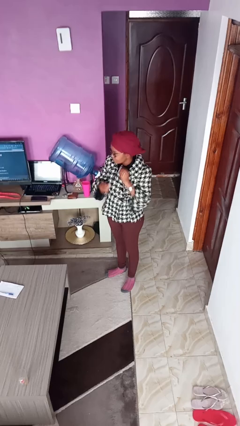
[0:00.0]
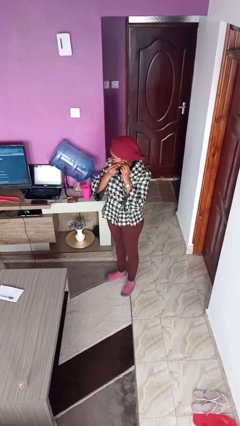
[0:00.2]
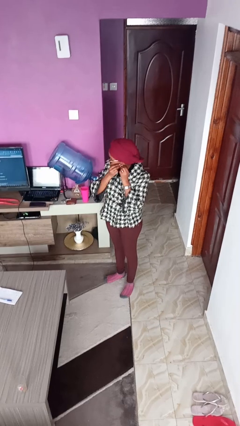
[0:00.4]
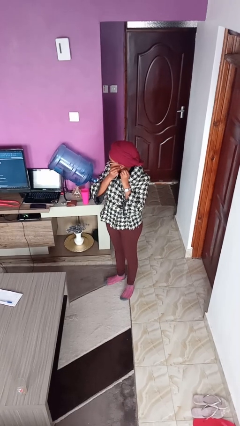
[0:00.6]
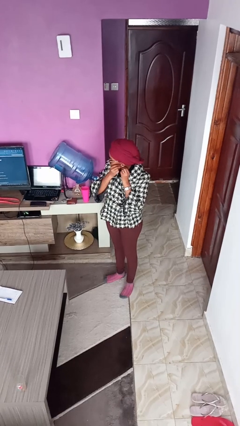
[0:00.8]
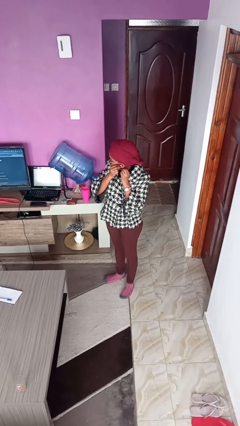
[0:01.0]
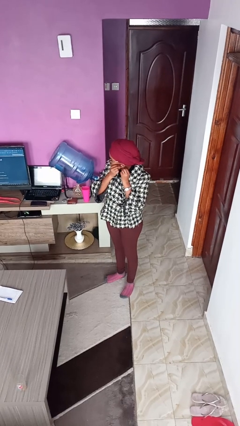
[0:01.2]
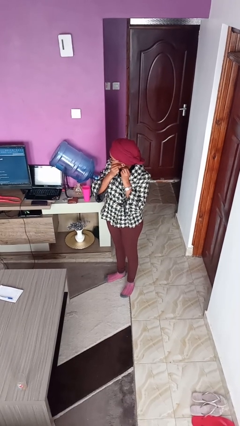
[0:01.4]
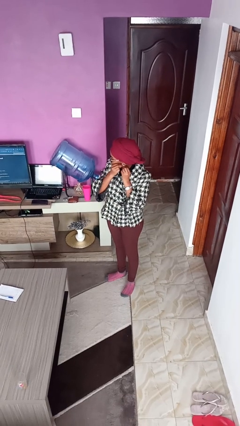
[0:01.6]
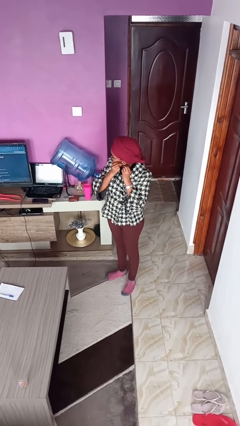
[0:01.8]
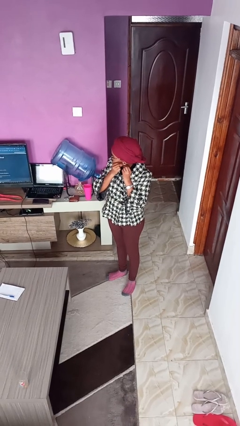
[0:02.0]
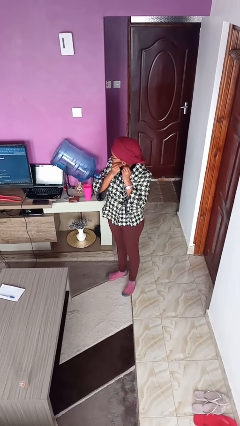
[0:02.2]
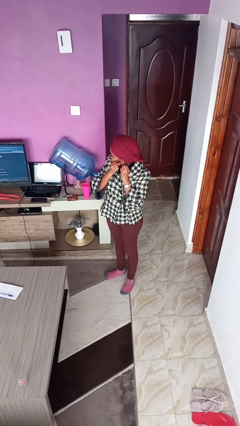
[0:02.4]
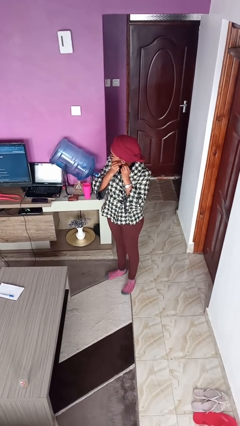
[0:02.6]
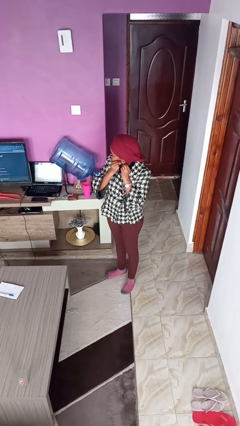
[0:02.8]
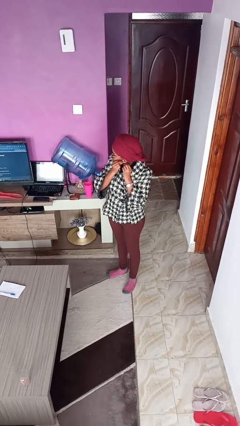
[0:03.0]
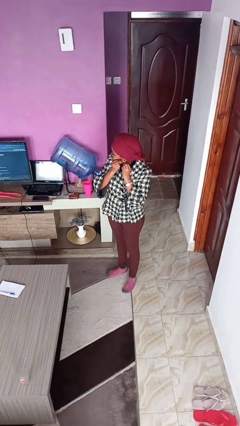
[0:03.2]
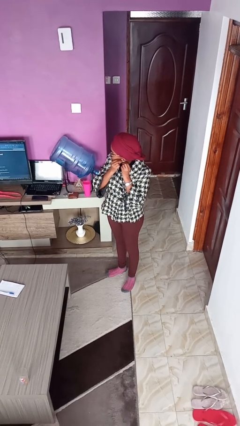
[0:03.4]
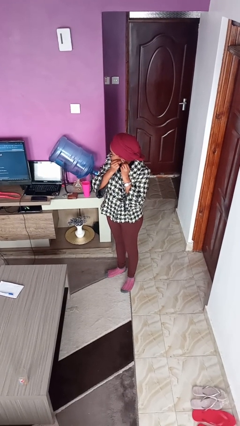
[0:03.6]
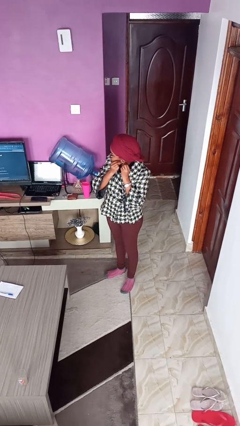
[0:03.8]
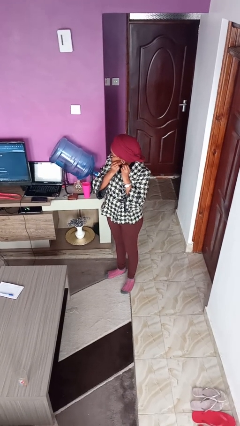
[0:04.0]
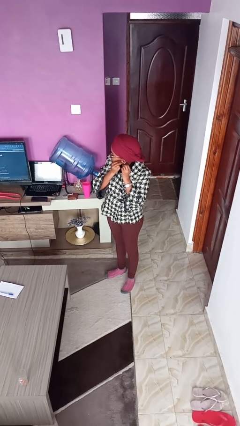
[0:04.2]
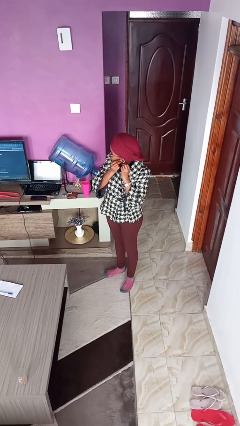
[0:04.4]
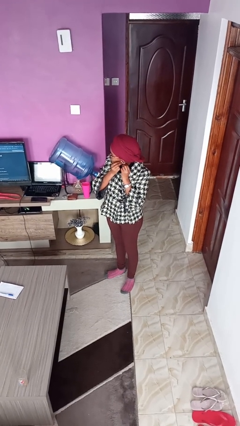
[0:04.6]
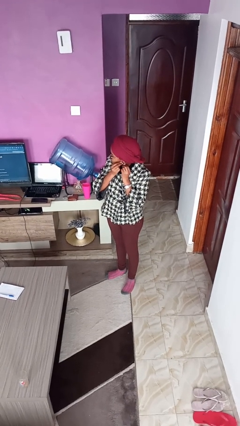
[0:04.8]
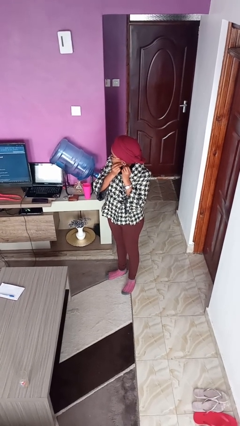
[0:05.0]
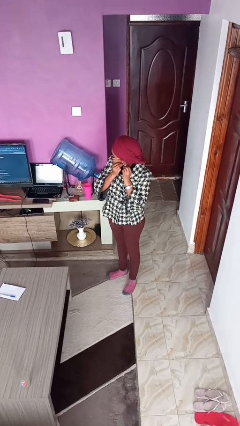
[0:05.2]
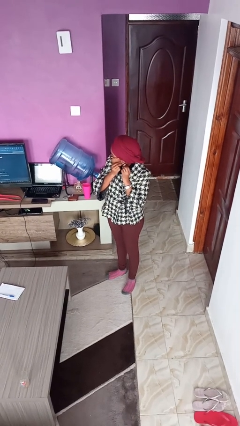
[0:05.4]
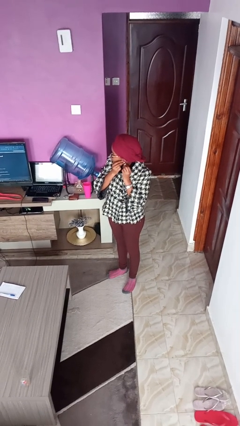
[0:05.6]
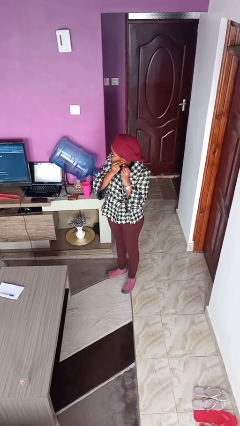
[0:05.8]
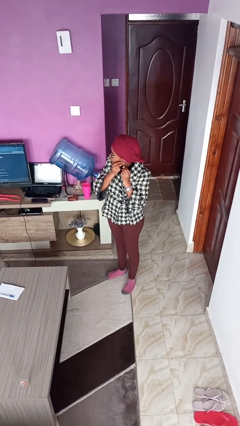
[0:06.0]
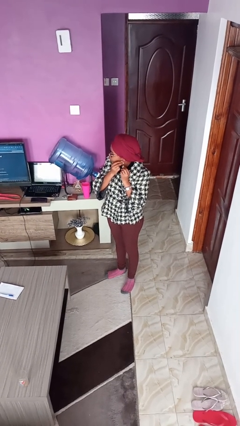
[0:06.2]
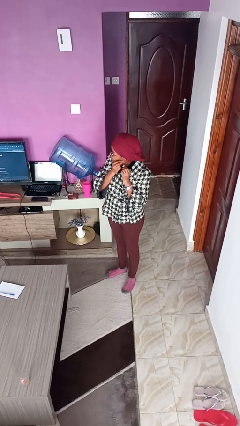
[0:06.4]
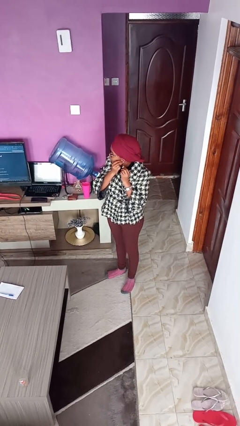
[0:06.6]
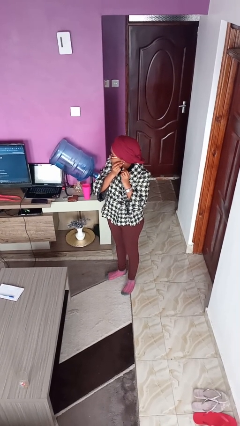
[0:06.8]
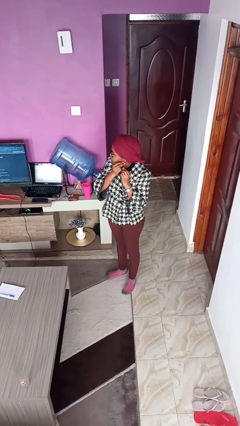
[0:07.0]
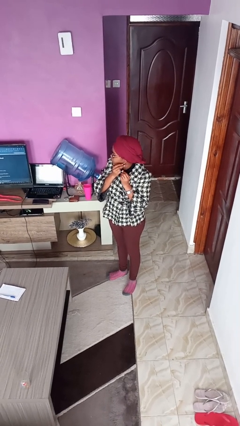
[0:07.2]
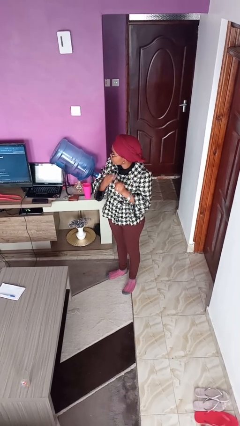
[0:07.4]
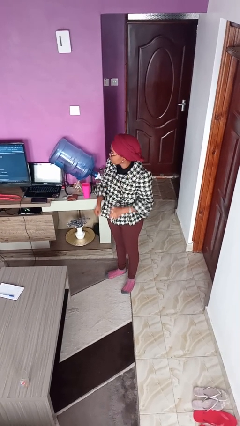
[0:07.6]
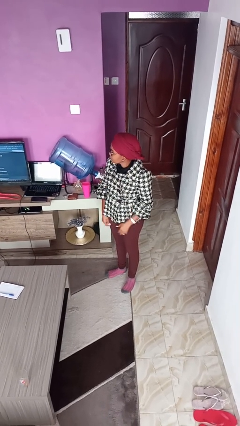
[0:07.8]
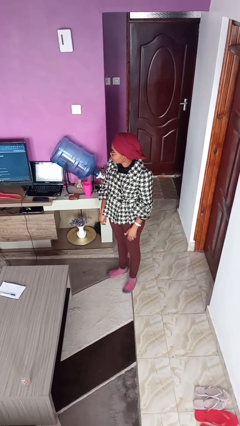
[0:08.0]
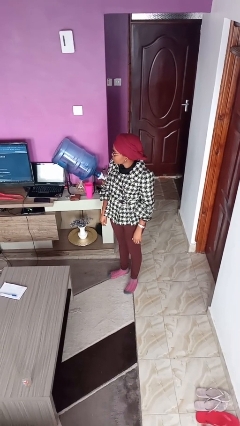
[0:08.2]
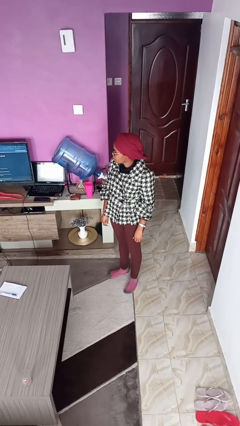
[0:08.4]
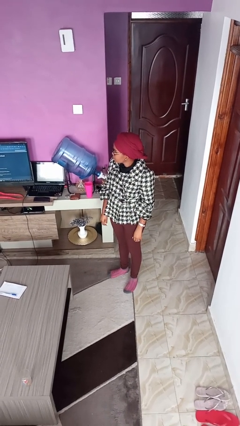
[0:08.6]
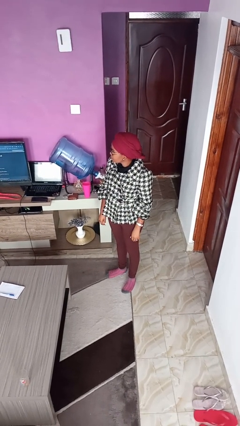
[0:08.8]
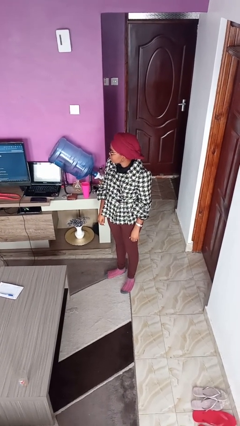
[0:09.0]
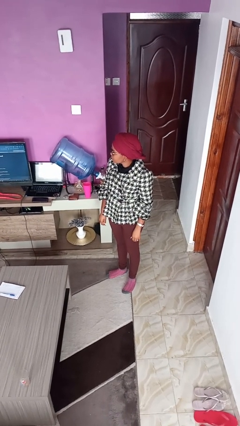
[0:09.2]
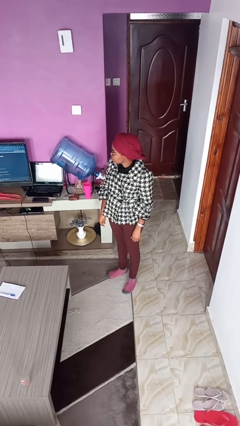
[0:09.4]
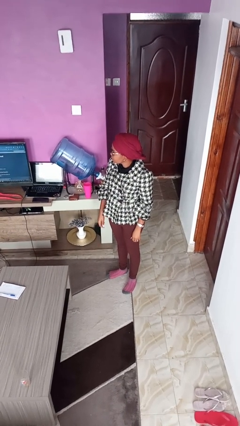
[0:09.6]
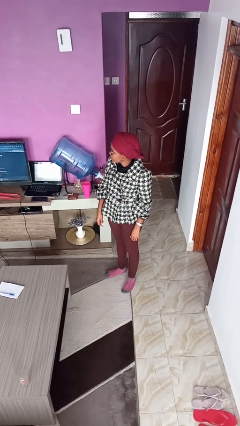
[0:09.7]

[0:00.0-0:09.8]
person puts on earrings

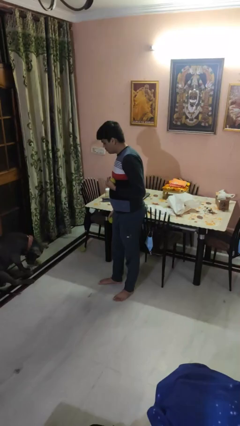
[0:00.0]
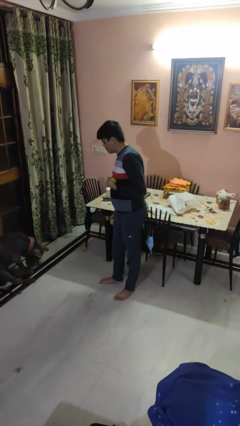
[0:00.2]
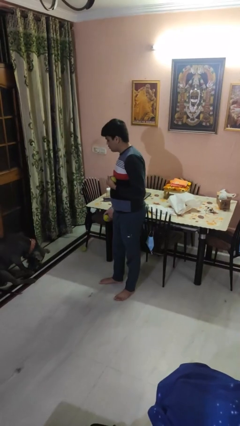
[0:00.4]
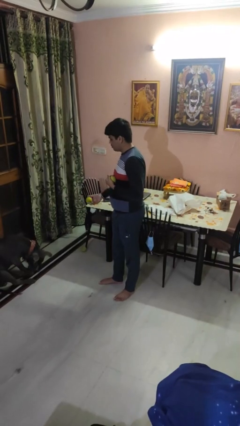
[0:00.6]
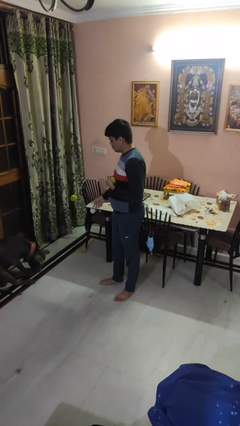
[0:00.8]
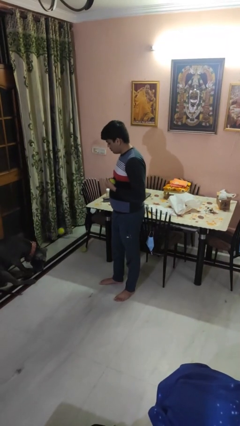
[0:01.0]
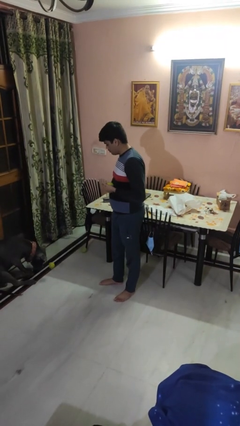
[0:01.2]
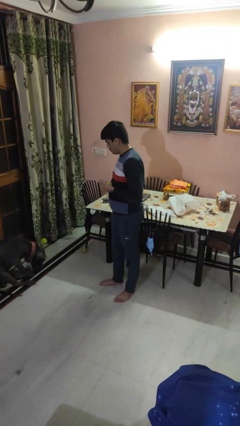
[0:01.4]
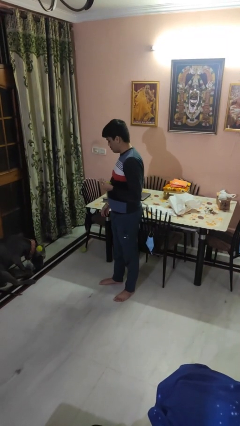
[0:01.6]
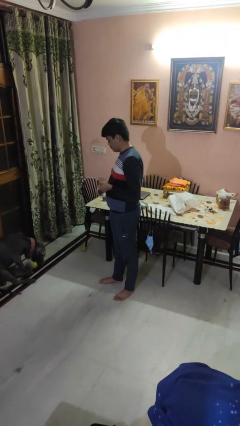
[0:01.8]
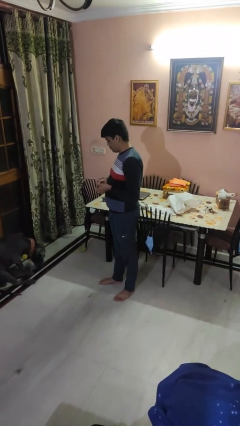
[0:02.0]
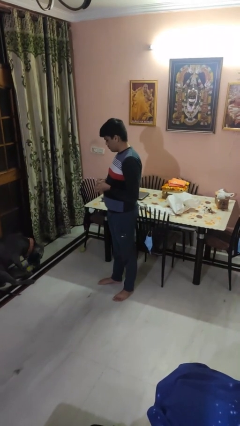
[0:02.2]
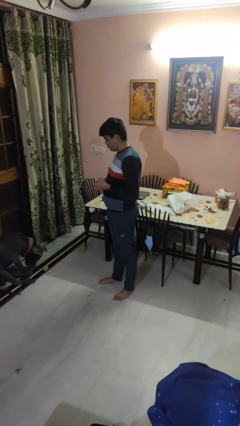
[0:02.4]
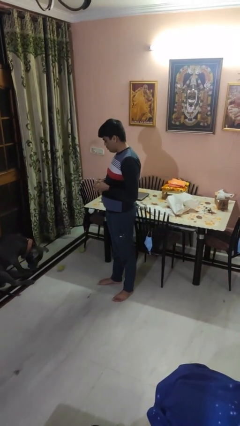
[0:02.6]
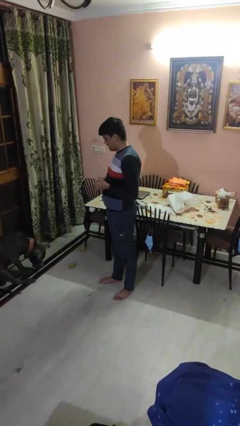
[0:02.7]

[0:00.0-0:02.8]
person throws object to dog

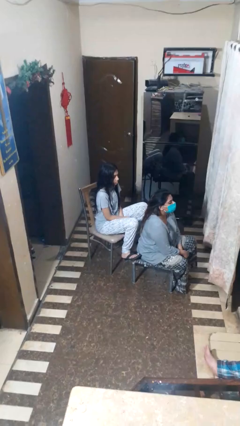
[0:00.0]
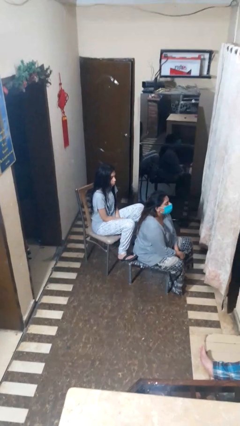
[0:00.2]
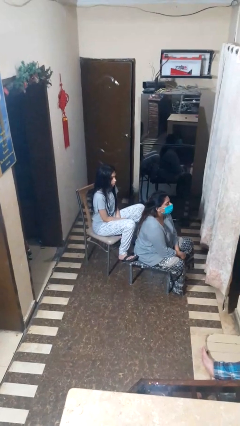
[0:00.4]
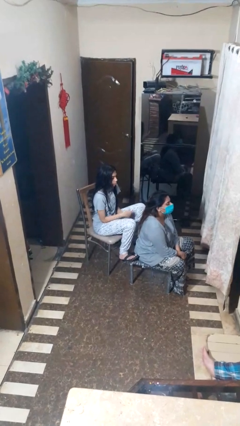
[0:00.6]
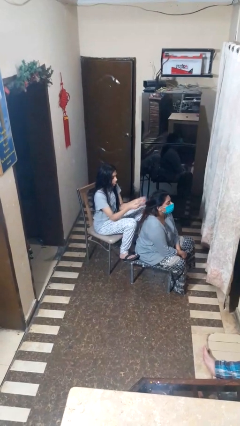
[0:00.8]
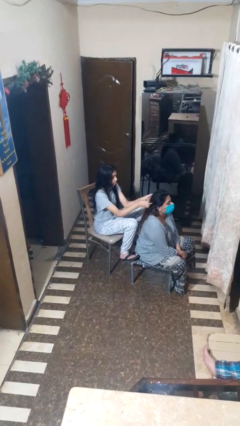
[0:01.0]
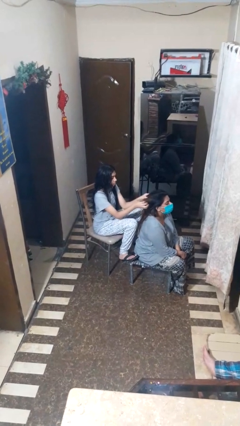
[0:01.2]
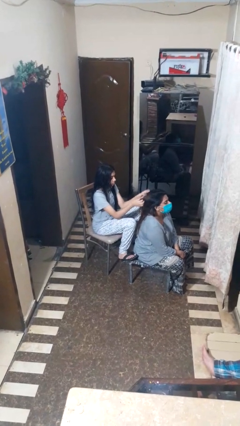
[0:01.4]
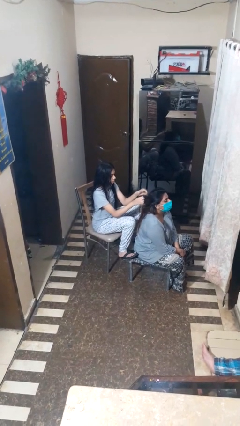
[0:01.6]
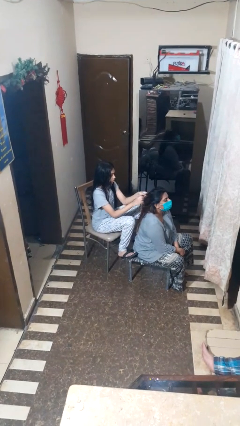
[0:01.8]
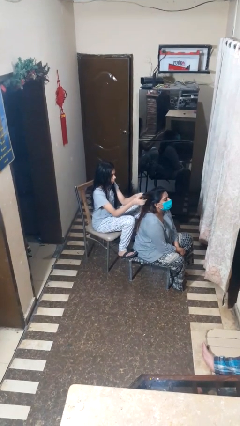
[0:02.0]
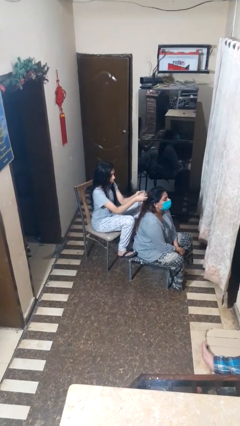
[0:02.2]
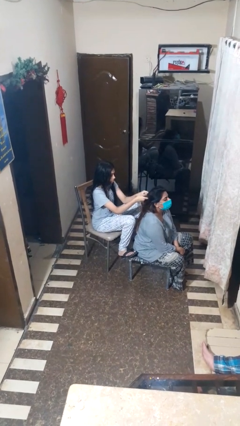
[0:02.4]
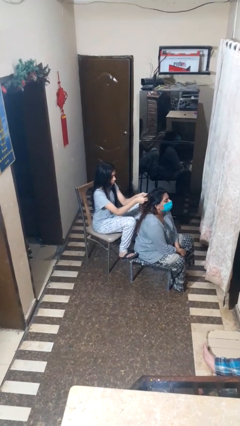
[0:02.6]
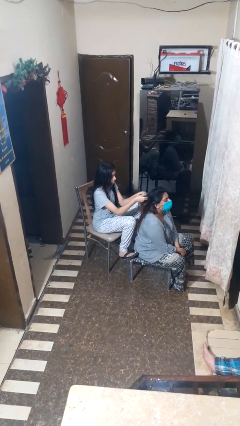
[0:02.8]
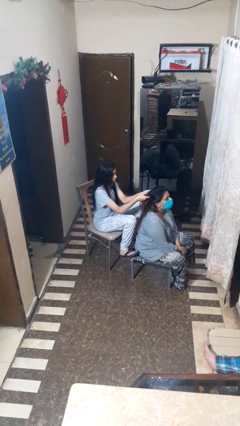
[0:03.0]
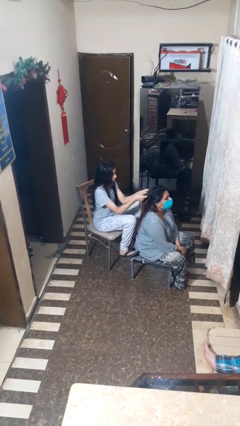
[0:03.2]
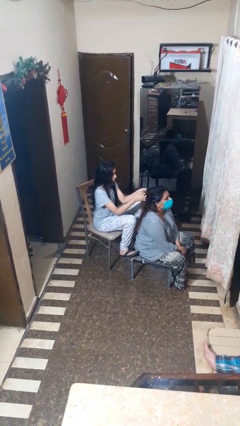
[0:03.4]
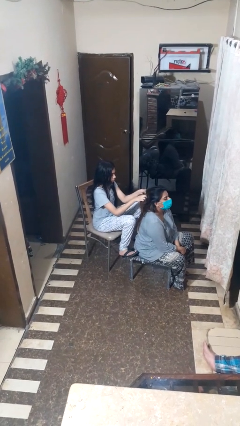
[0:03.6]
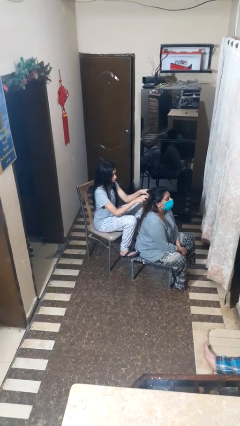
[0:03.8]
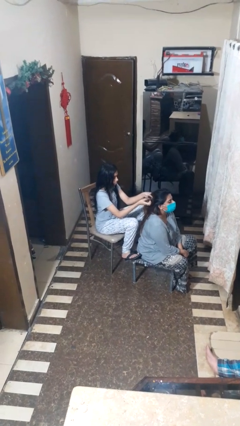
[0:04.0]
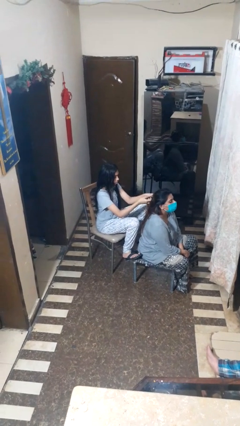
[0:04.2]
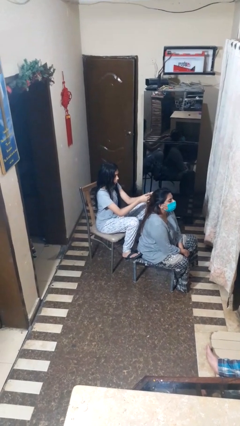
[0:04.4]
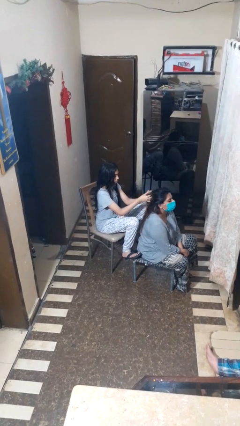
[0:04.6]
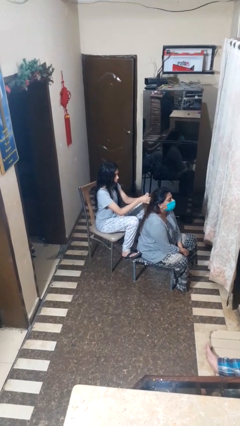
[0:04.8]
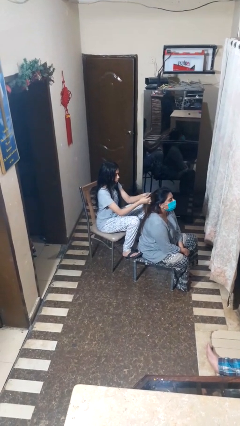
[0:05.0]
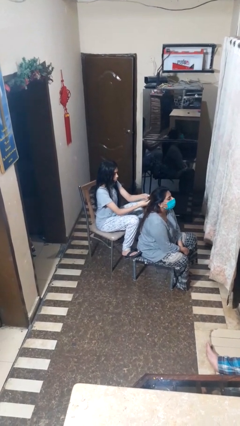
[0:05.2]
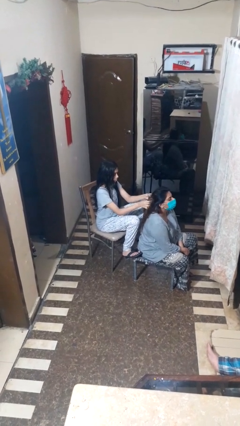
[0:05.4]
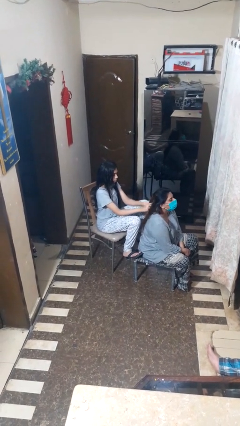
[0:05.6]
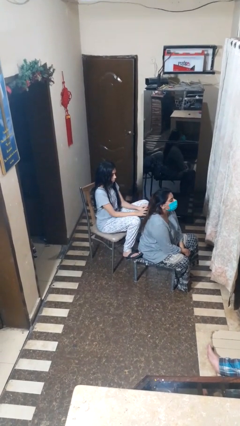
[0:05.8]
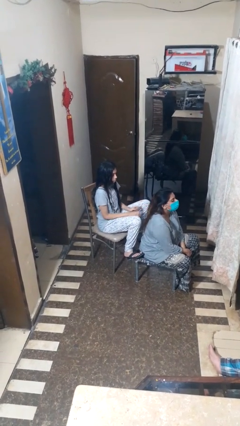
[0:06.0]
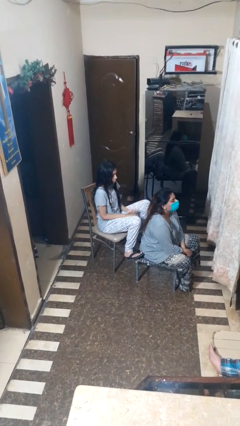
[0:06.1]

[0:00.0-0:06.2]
person braids hair of person
